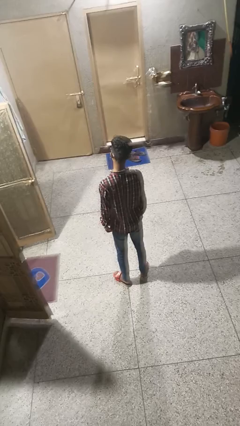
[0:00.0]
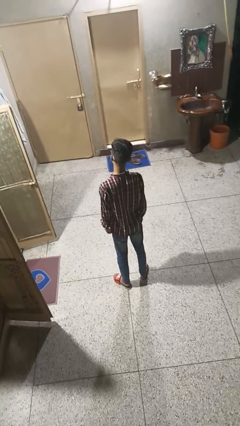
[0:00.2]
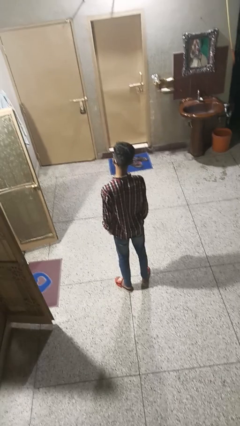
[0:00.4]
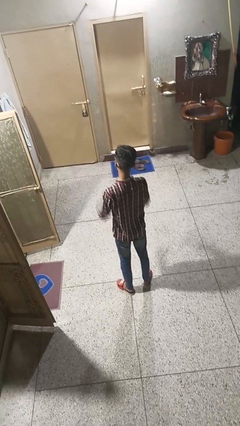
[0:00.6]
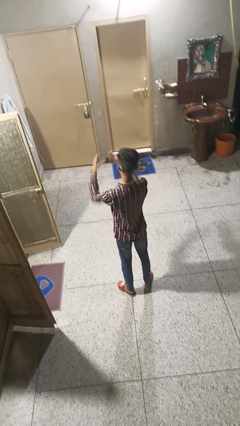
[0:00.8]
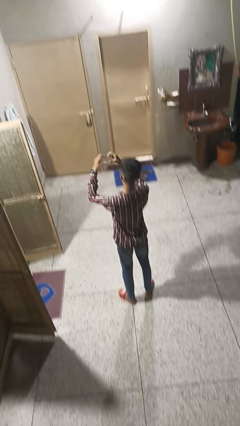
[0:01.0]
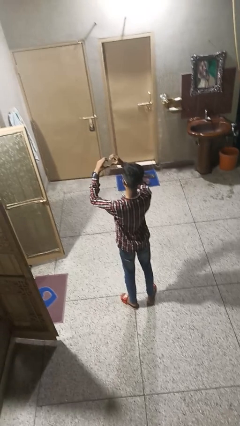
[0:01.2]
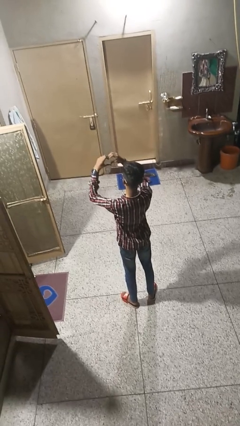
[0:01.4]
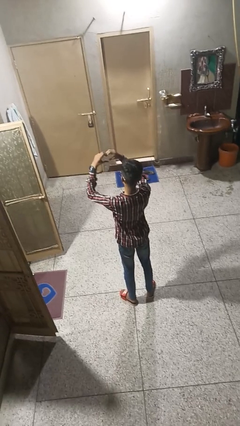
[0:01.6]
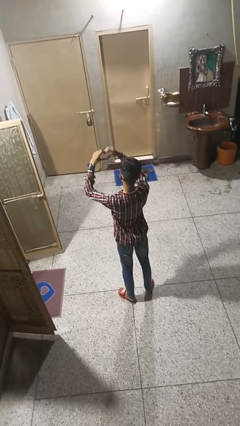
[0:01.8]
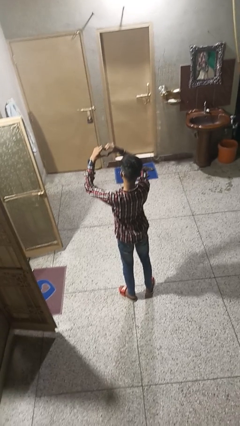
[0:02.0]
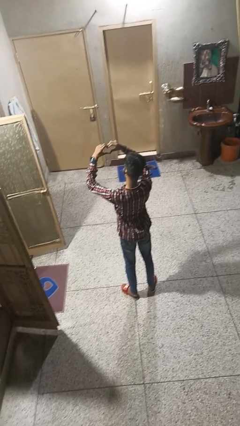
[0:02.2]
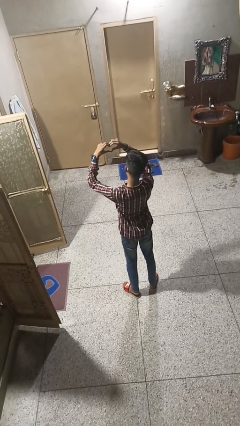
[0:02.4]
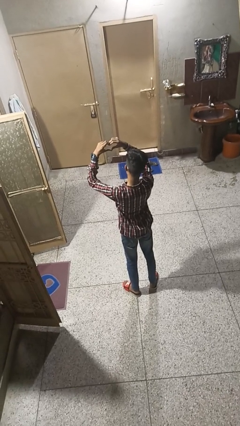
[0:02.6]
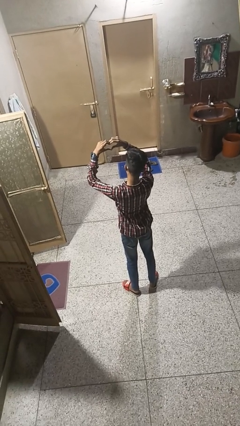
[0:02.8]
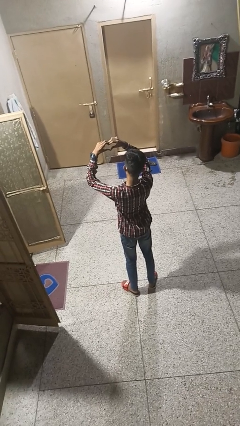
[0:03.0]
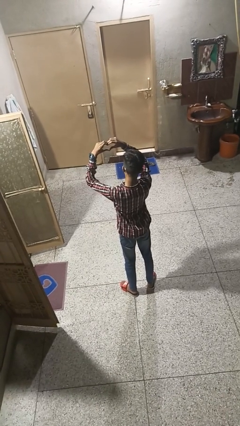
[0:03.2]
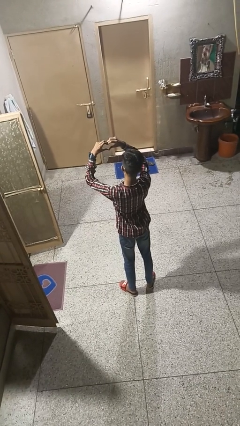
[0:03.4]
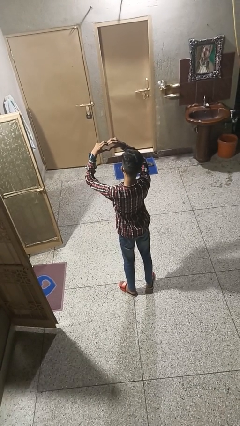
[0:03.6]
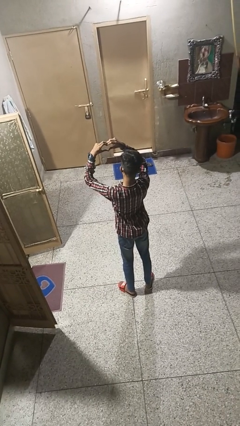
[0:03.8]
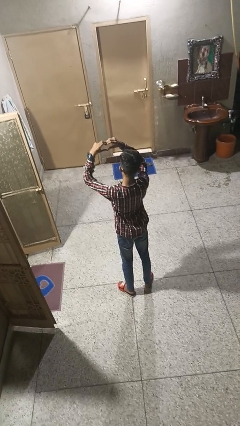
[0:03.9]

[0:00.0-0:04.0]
person gestures heart

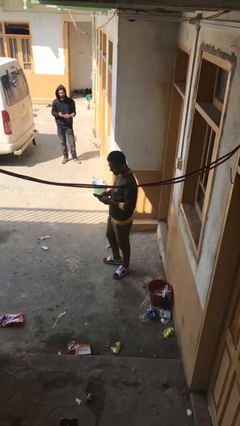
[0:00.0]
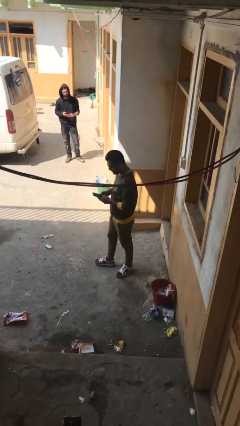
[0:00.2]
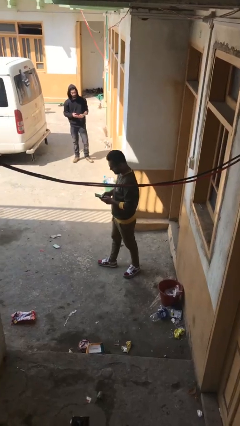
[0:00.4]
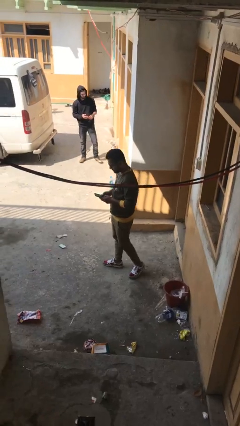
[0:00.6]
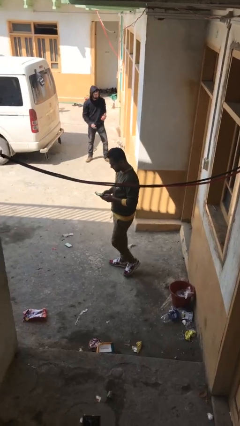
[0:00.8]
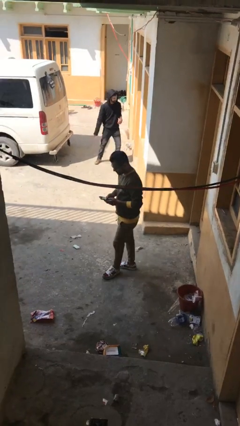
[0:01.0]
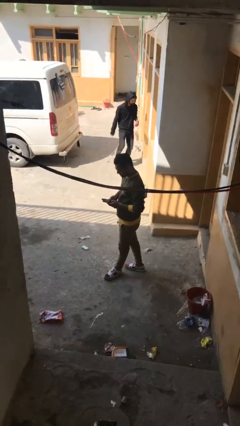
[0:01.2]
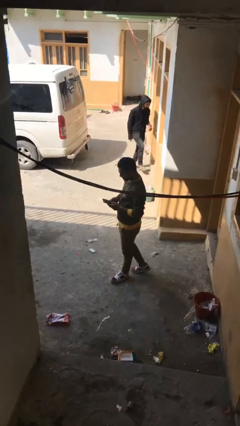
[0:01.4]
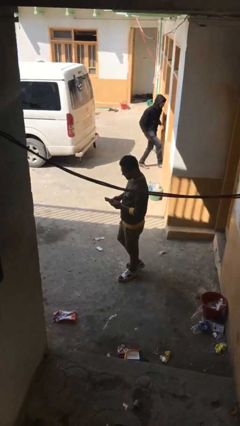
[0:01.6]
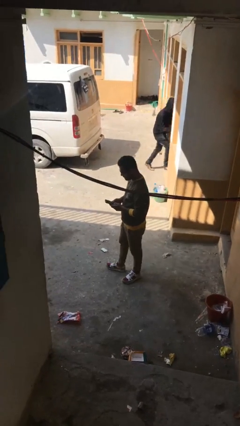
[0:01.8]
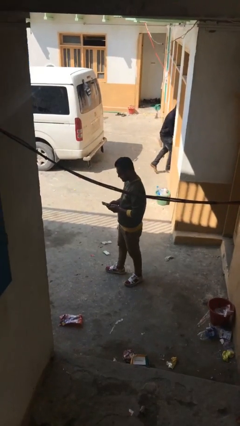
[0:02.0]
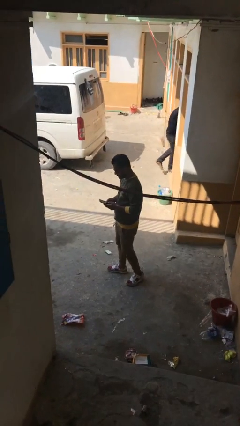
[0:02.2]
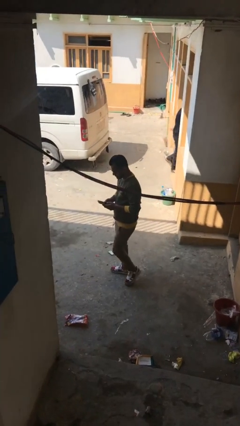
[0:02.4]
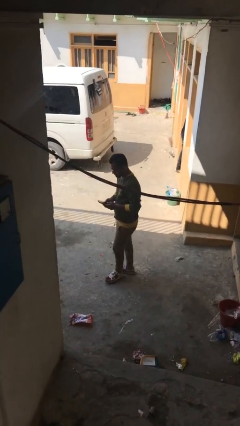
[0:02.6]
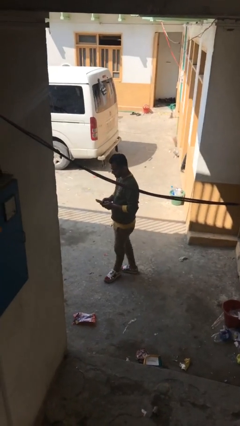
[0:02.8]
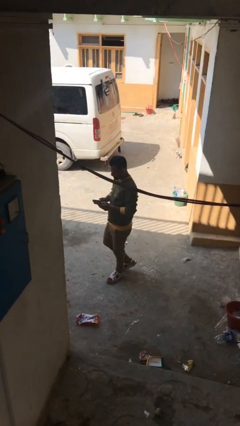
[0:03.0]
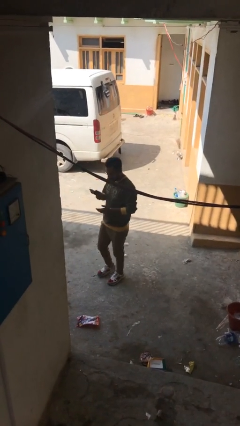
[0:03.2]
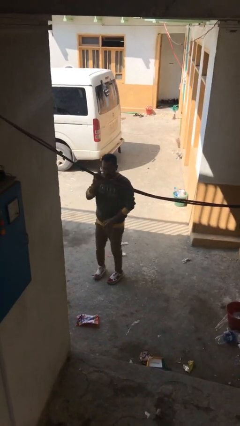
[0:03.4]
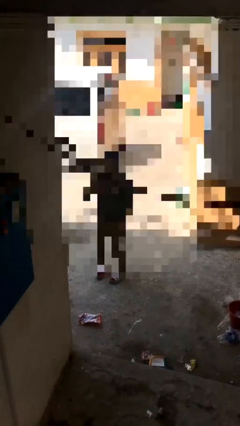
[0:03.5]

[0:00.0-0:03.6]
person texts on phone

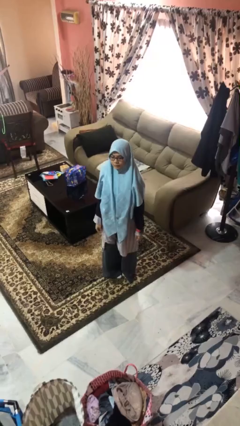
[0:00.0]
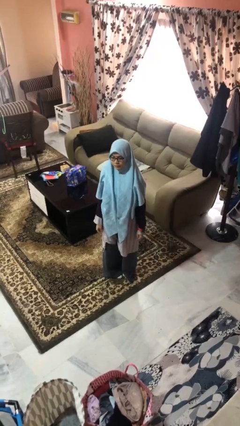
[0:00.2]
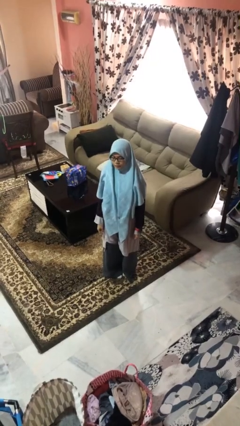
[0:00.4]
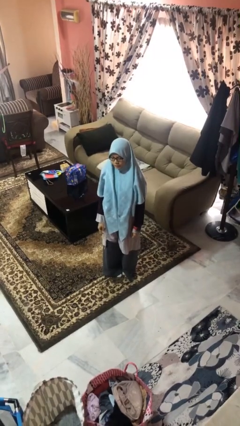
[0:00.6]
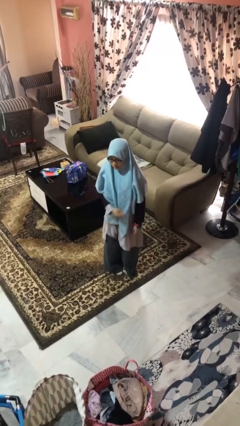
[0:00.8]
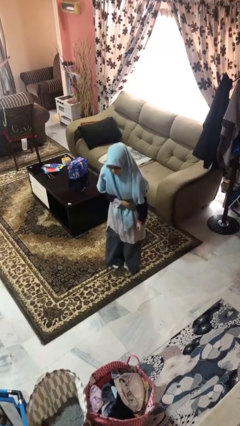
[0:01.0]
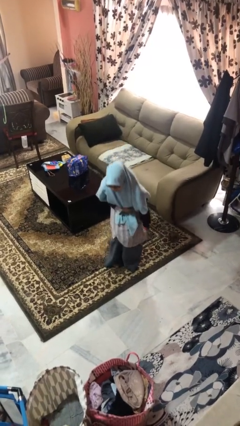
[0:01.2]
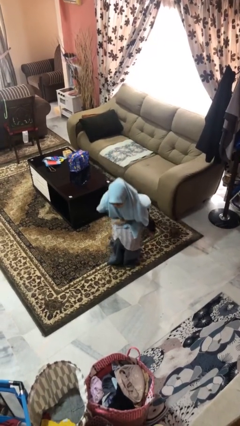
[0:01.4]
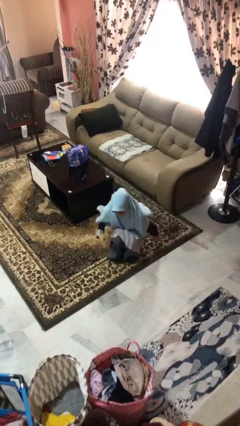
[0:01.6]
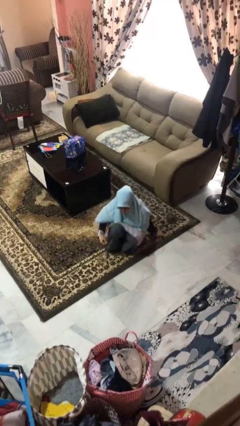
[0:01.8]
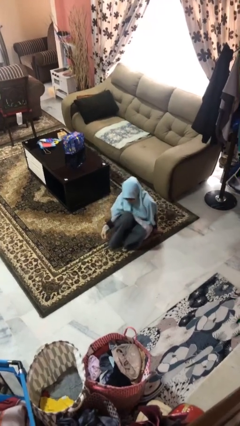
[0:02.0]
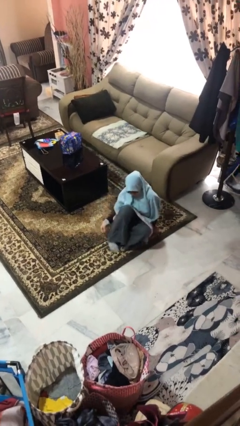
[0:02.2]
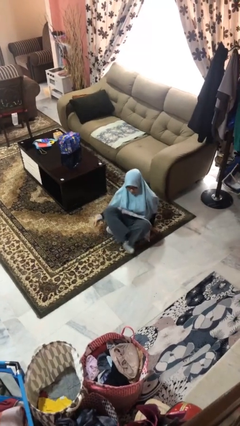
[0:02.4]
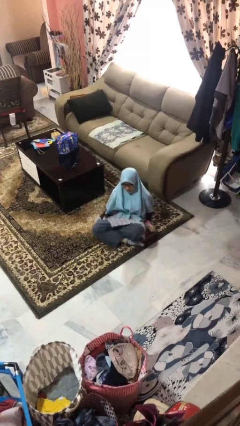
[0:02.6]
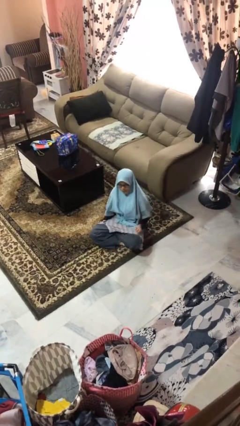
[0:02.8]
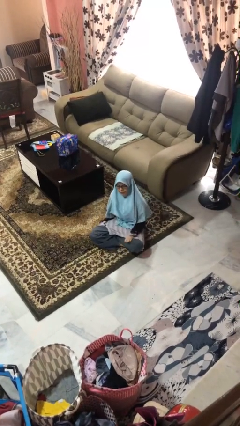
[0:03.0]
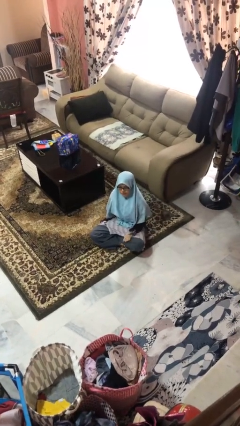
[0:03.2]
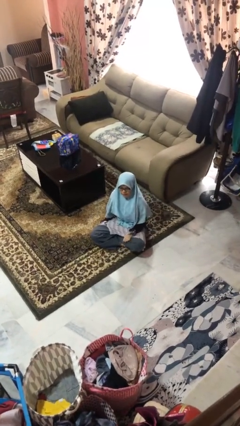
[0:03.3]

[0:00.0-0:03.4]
person sits crisscross

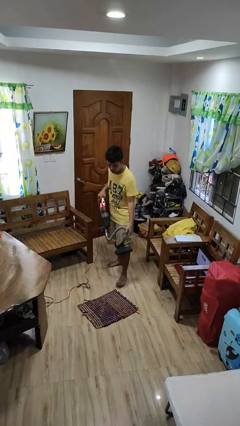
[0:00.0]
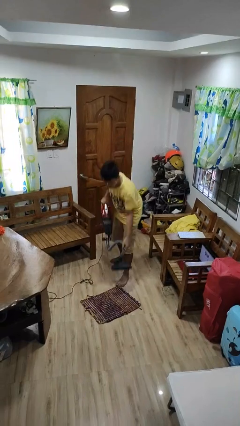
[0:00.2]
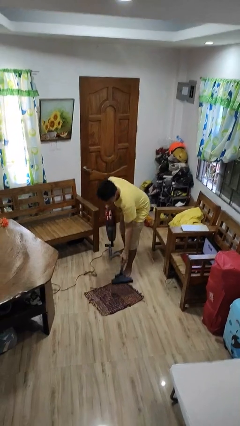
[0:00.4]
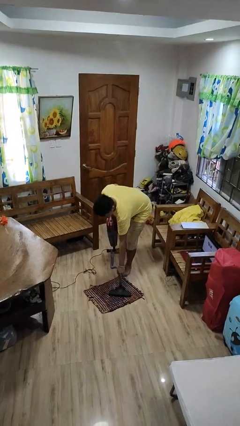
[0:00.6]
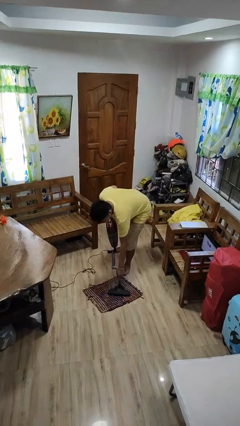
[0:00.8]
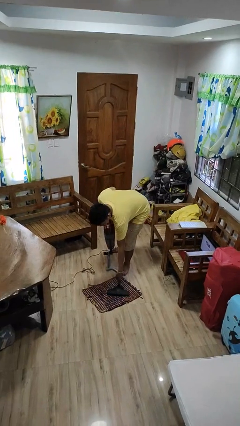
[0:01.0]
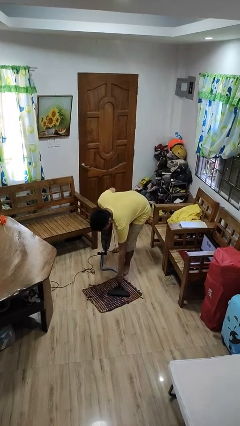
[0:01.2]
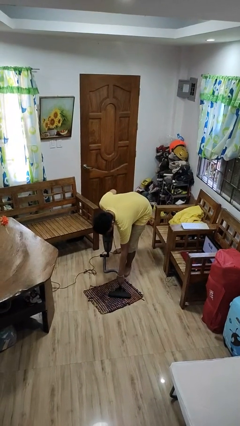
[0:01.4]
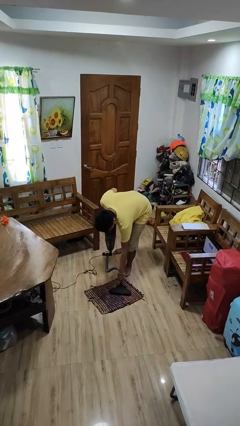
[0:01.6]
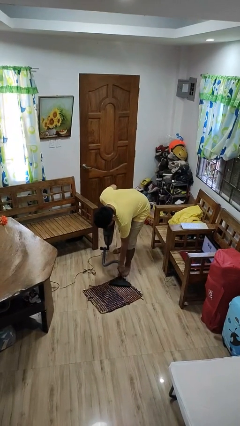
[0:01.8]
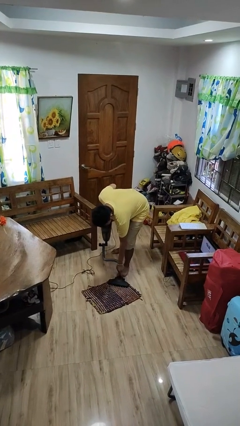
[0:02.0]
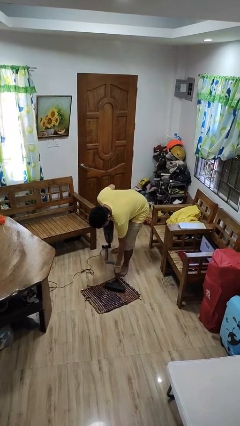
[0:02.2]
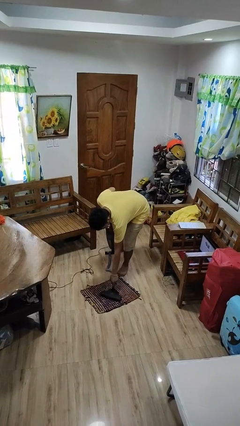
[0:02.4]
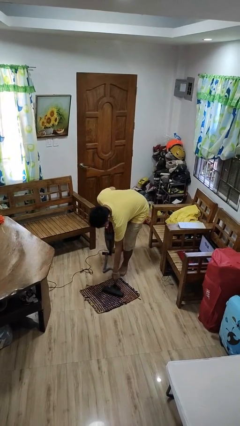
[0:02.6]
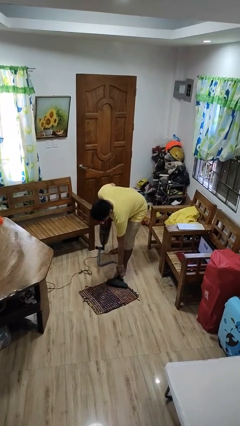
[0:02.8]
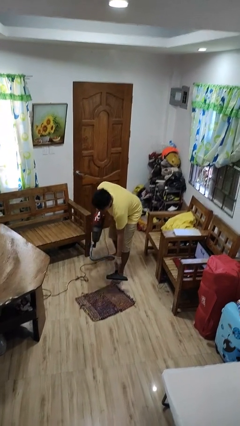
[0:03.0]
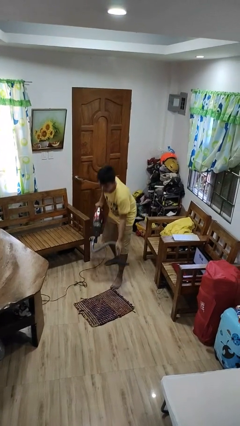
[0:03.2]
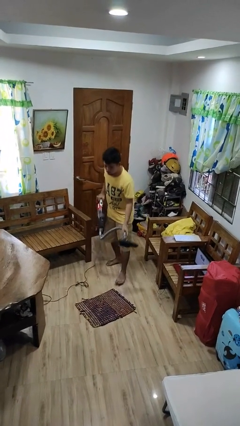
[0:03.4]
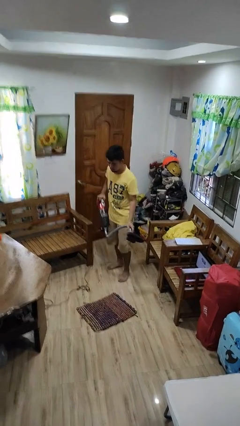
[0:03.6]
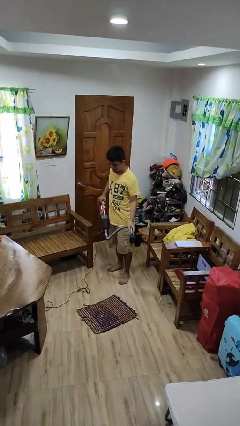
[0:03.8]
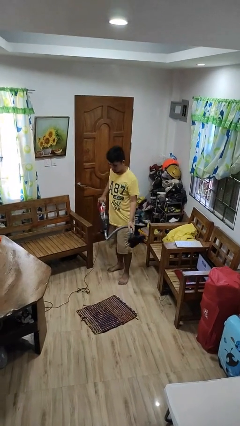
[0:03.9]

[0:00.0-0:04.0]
person vacuums carpet

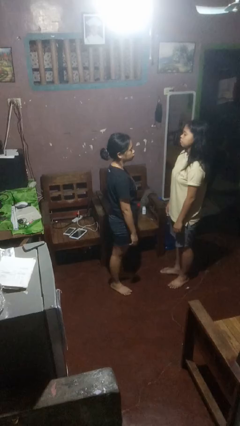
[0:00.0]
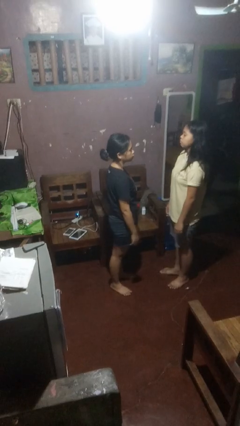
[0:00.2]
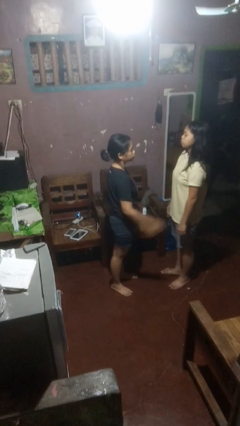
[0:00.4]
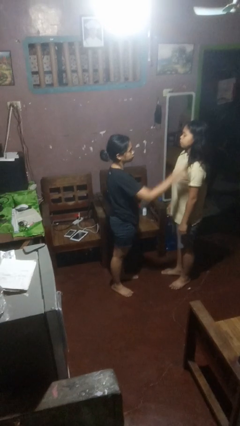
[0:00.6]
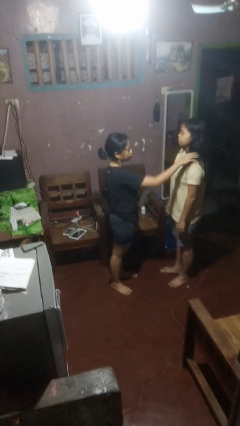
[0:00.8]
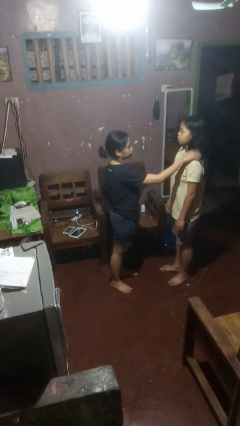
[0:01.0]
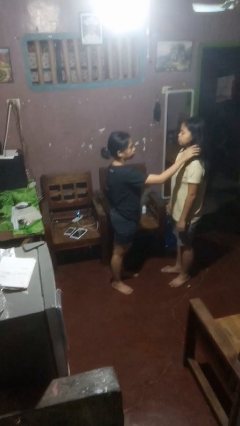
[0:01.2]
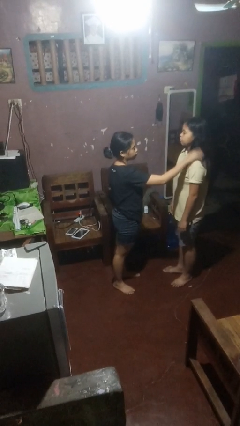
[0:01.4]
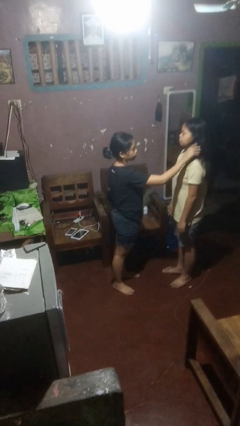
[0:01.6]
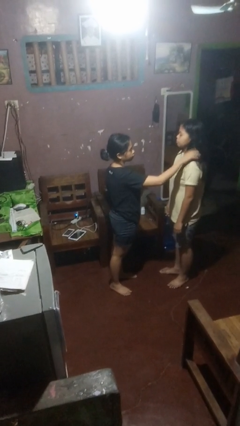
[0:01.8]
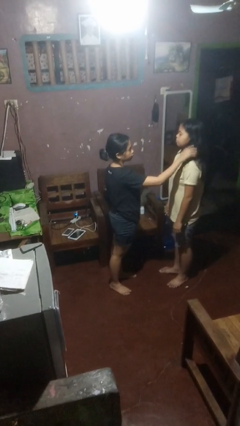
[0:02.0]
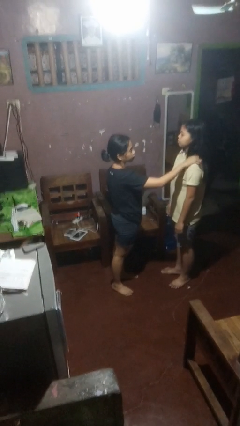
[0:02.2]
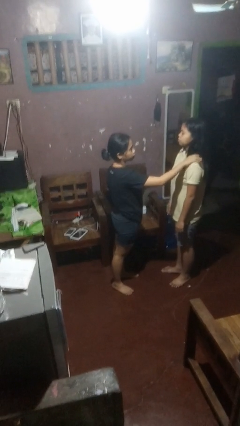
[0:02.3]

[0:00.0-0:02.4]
person pounds shoulders of person

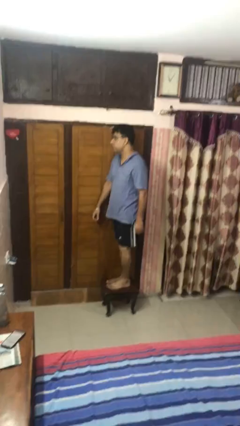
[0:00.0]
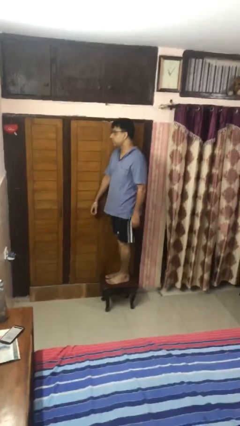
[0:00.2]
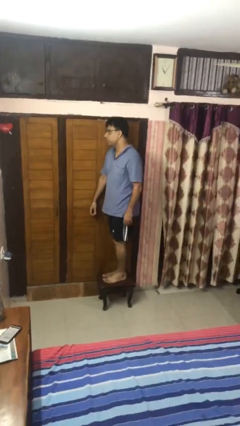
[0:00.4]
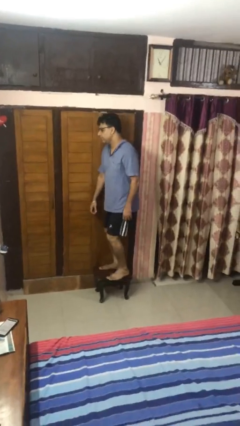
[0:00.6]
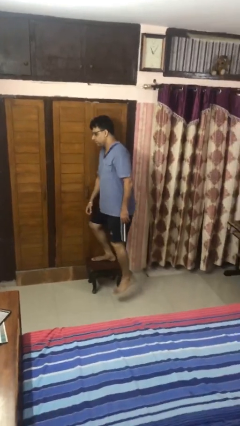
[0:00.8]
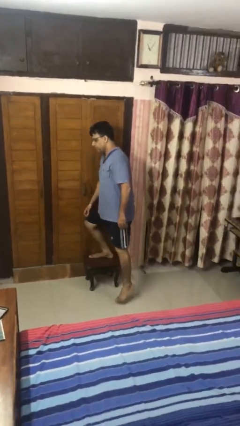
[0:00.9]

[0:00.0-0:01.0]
person climbs off table
